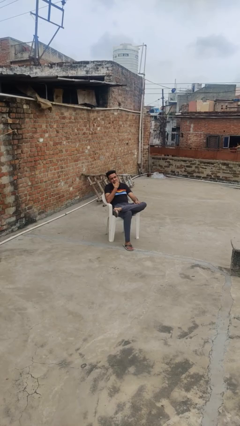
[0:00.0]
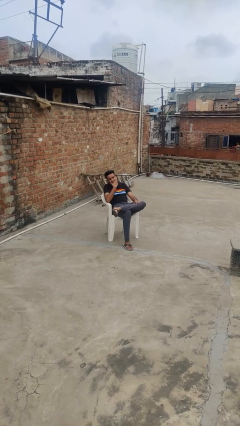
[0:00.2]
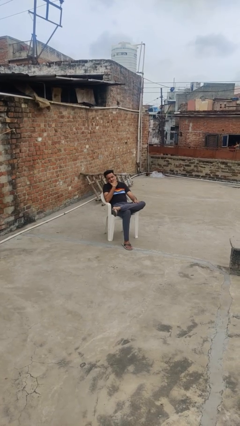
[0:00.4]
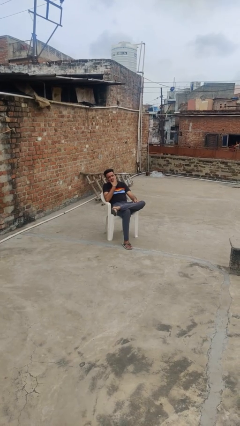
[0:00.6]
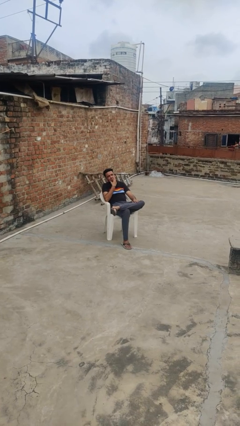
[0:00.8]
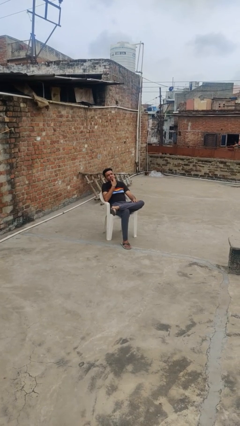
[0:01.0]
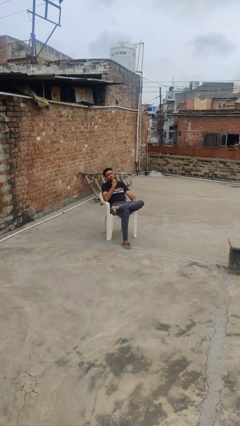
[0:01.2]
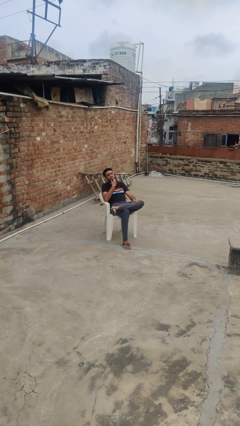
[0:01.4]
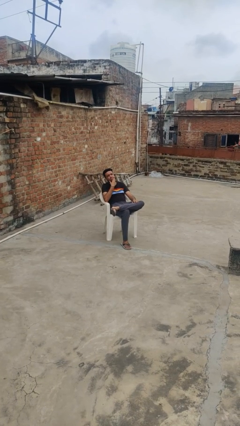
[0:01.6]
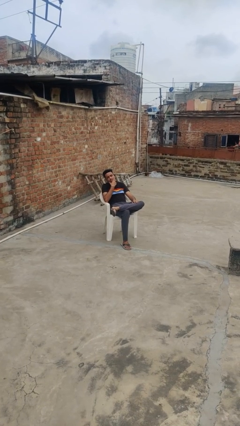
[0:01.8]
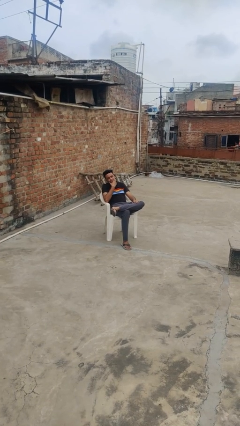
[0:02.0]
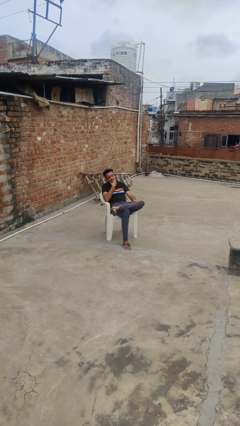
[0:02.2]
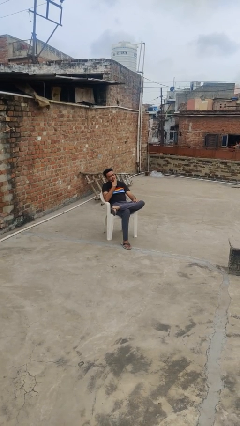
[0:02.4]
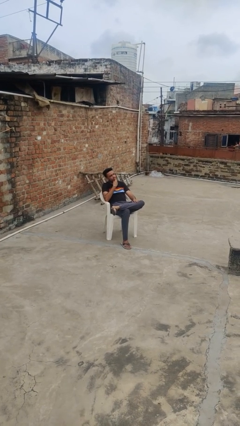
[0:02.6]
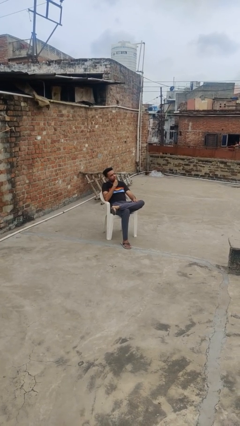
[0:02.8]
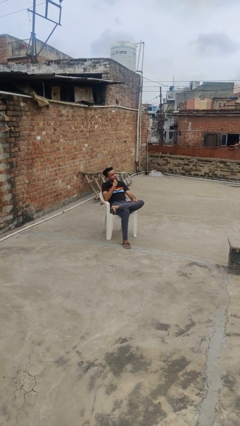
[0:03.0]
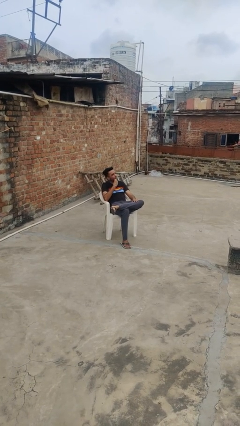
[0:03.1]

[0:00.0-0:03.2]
person strokes chin

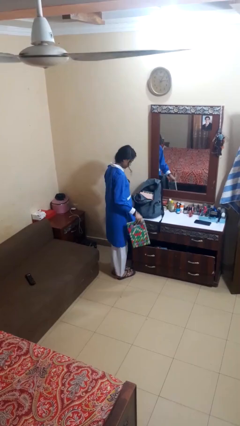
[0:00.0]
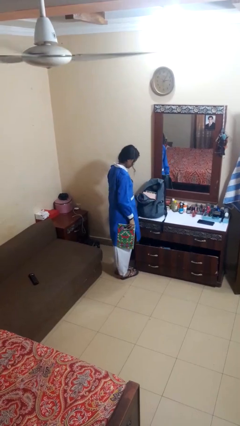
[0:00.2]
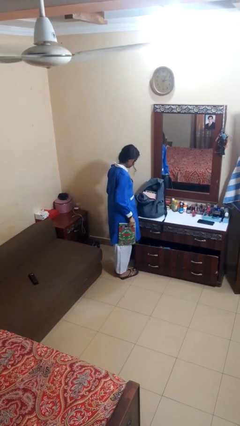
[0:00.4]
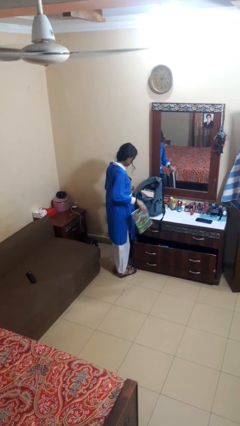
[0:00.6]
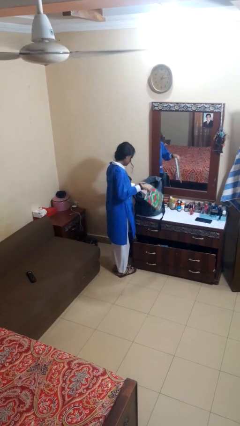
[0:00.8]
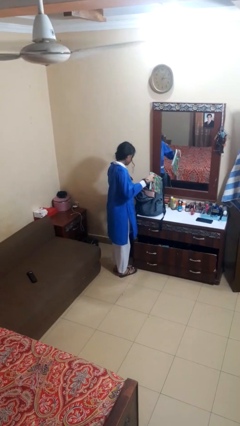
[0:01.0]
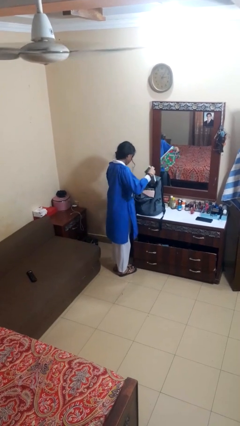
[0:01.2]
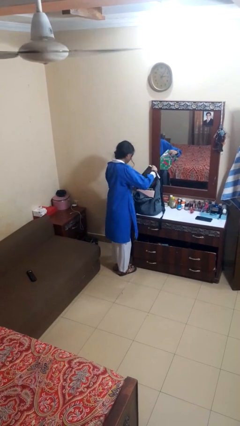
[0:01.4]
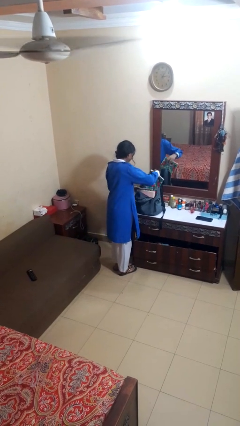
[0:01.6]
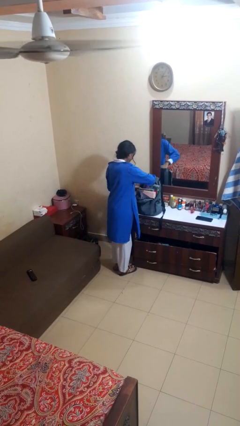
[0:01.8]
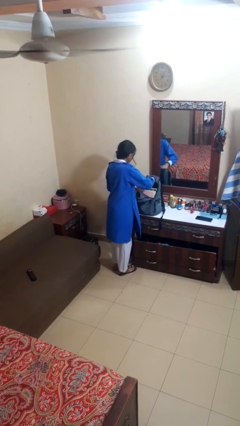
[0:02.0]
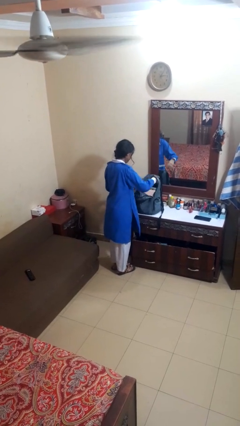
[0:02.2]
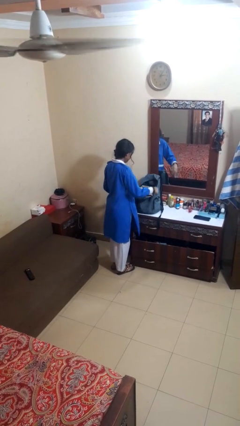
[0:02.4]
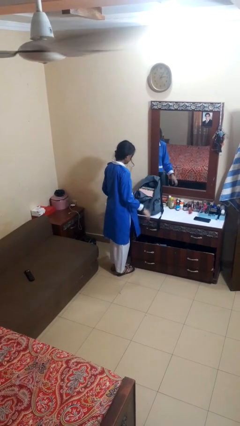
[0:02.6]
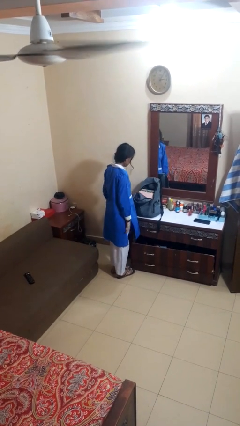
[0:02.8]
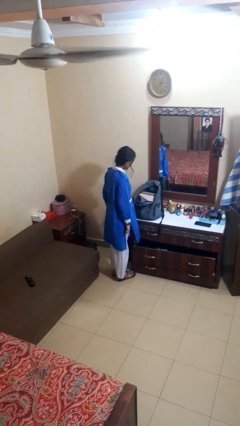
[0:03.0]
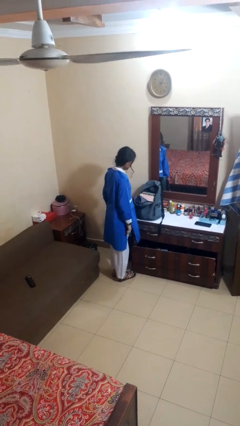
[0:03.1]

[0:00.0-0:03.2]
person puts object into bag

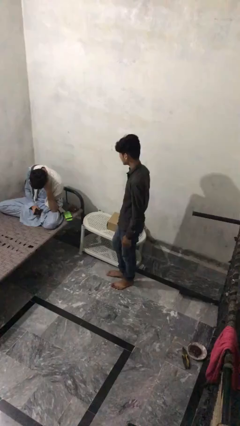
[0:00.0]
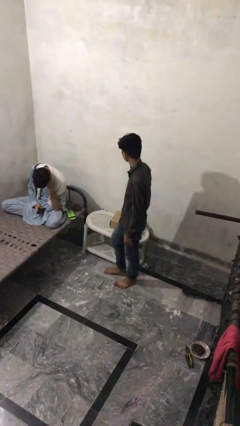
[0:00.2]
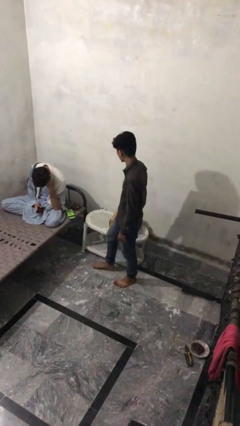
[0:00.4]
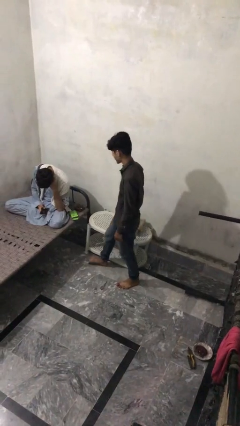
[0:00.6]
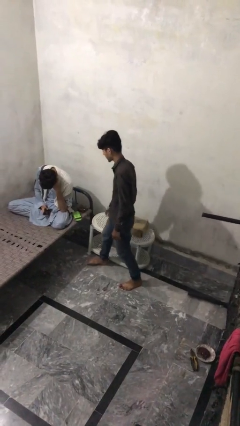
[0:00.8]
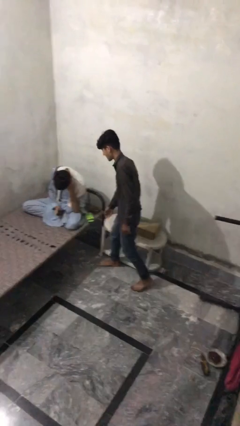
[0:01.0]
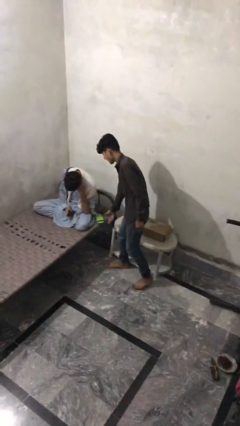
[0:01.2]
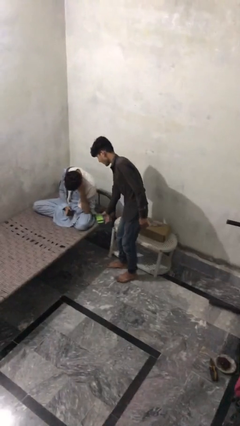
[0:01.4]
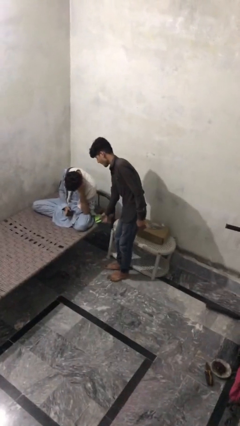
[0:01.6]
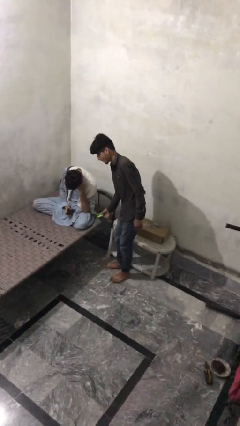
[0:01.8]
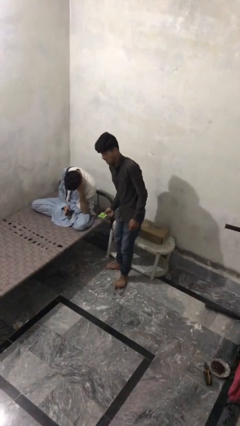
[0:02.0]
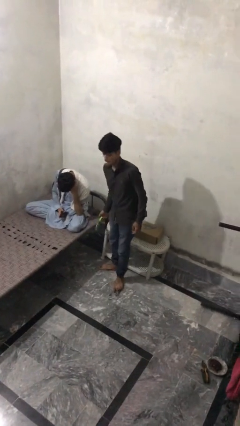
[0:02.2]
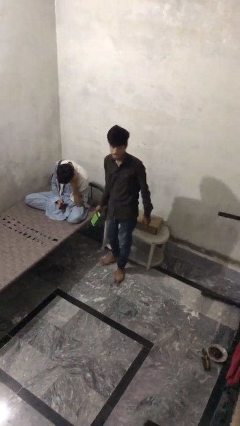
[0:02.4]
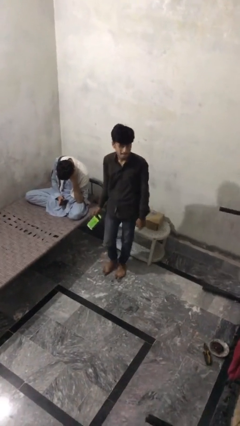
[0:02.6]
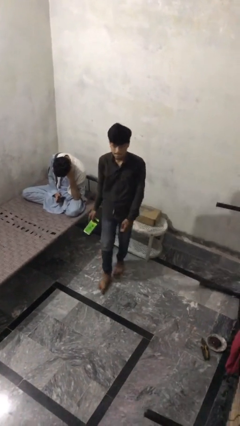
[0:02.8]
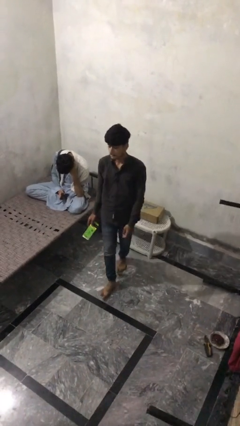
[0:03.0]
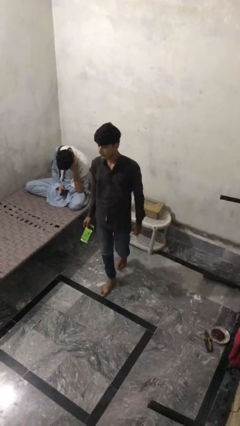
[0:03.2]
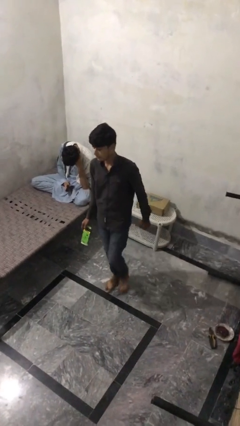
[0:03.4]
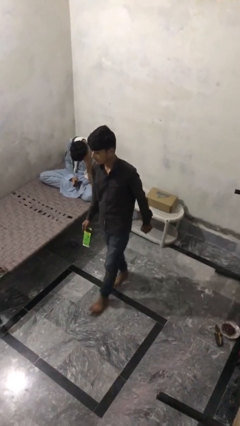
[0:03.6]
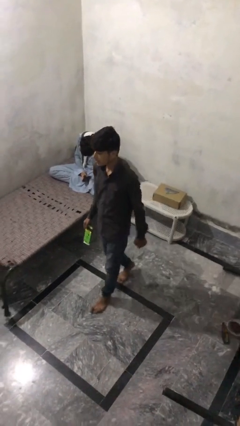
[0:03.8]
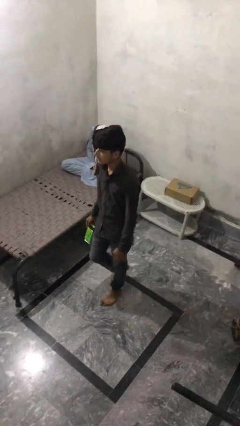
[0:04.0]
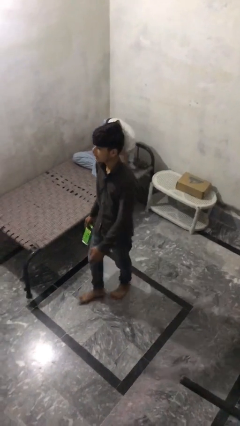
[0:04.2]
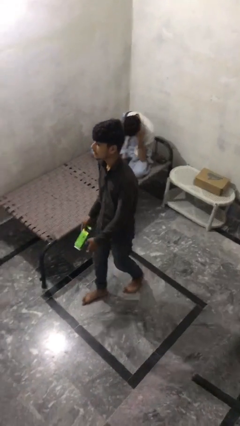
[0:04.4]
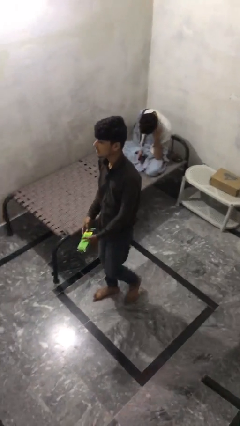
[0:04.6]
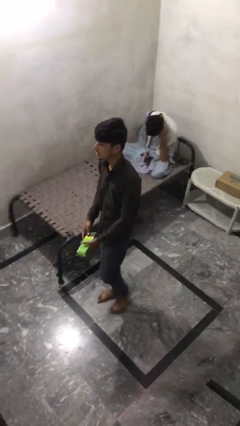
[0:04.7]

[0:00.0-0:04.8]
person steals object from person

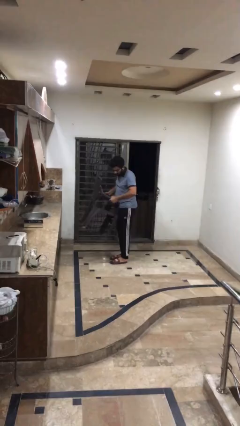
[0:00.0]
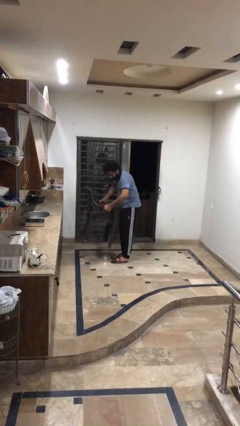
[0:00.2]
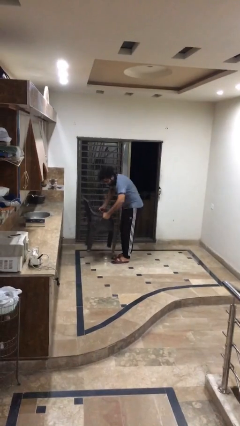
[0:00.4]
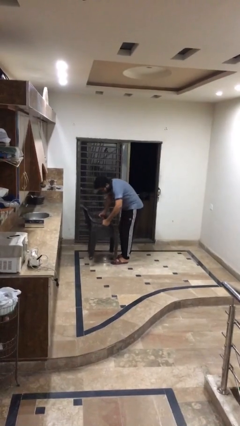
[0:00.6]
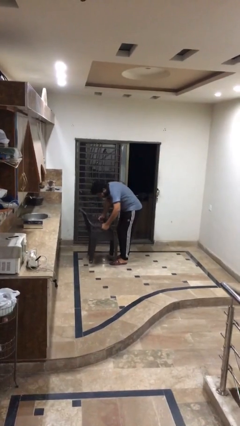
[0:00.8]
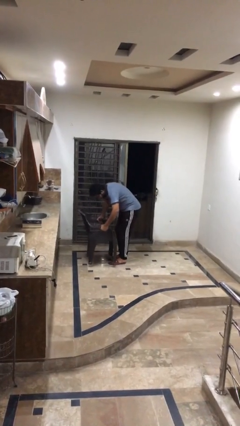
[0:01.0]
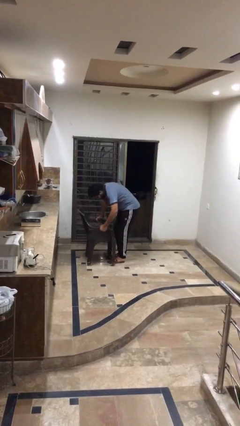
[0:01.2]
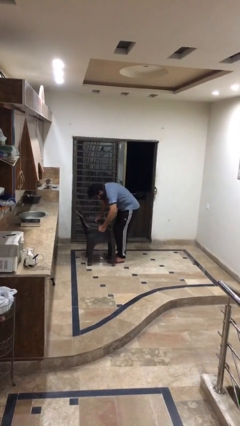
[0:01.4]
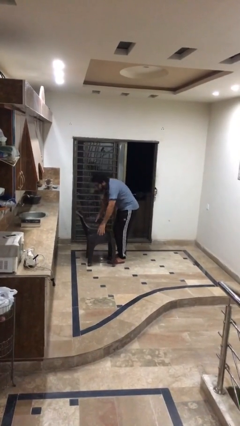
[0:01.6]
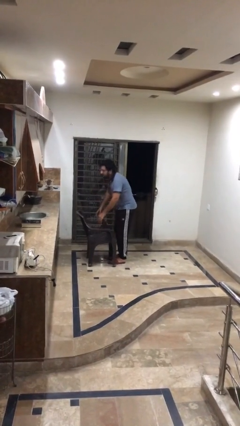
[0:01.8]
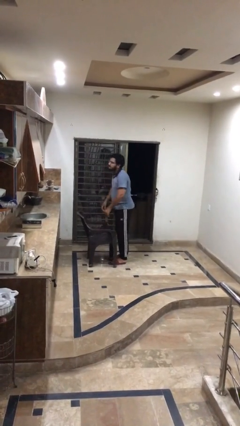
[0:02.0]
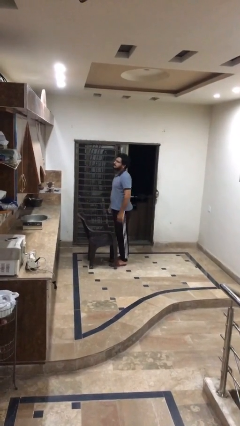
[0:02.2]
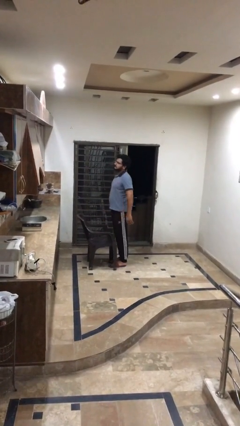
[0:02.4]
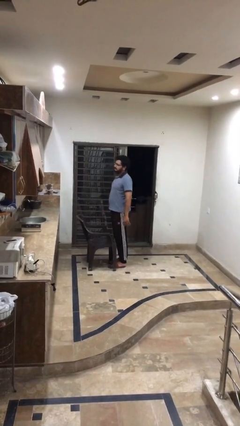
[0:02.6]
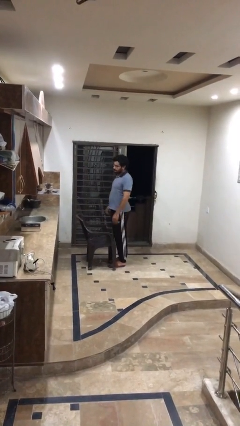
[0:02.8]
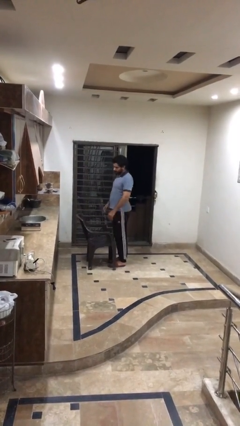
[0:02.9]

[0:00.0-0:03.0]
person puts down object on floor

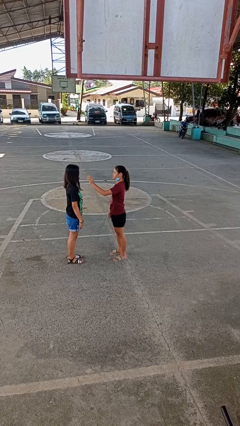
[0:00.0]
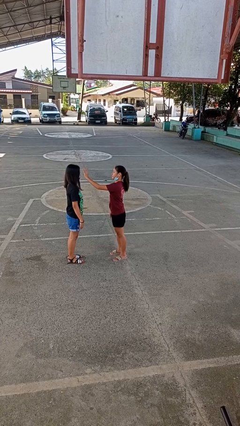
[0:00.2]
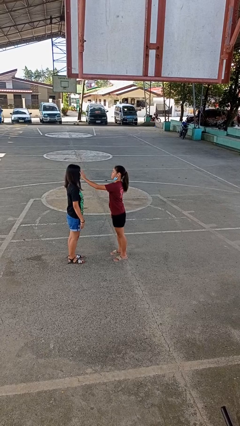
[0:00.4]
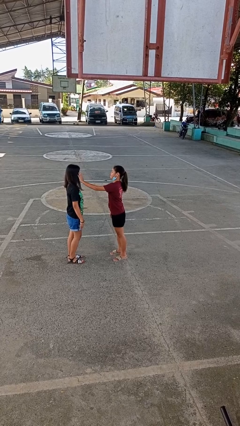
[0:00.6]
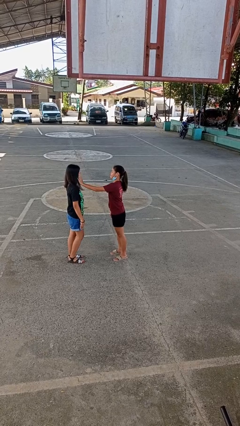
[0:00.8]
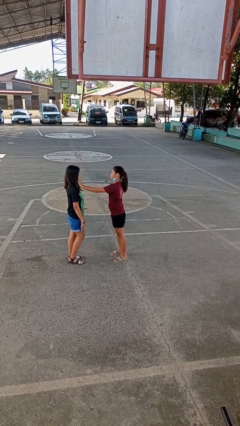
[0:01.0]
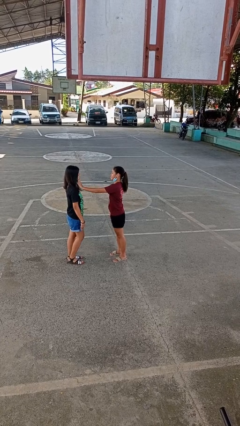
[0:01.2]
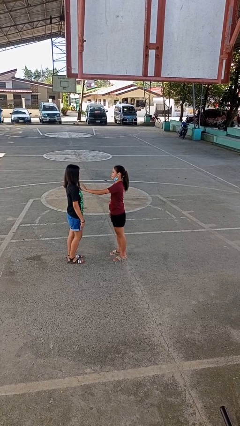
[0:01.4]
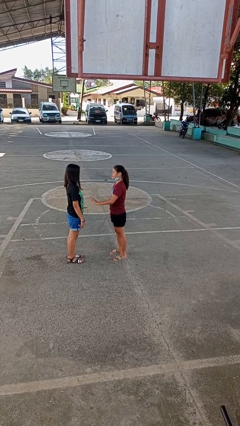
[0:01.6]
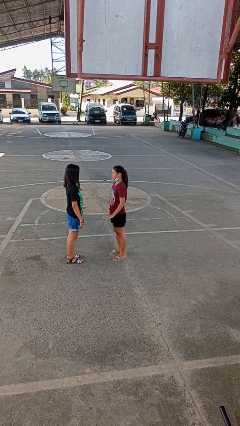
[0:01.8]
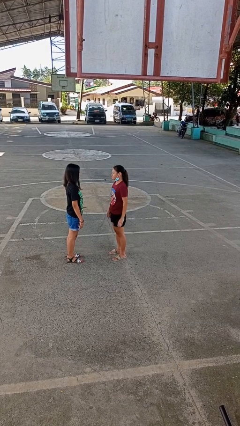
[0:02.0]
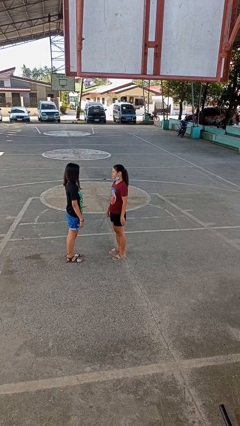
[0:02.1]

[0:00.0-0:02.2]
person touches face of person

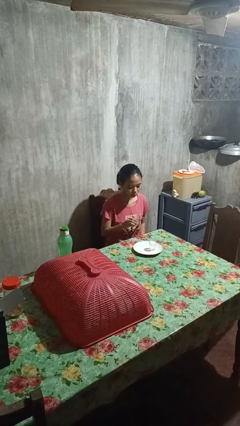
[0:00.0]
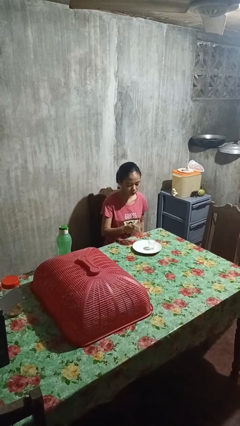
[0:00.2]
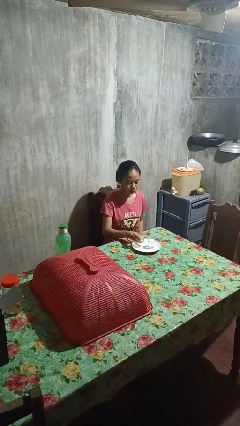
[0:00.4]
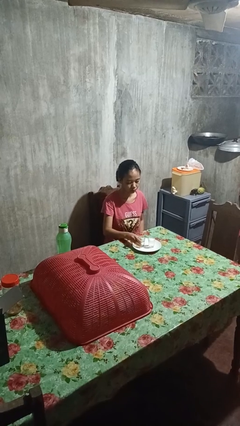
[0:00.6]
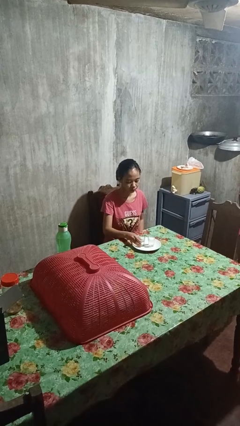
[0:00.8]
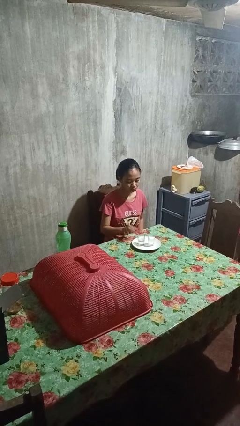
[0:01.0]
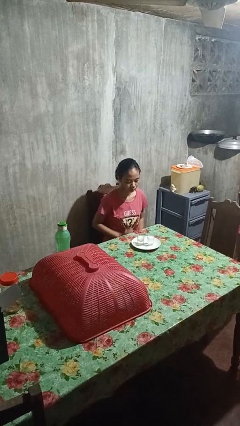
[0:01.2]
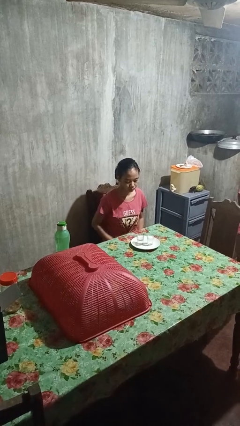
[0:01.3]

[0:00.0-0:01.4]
person puts down object on table
